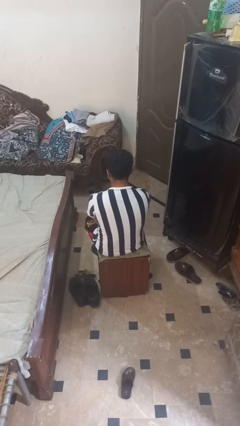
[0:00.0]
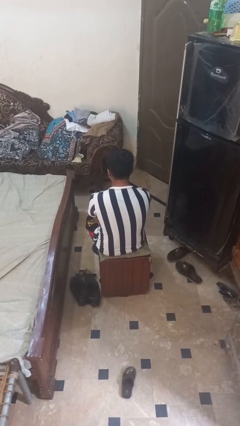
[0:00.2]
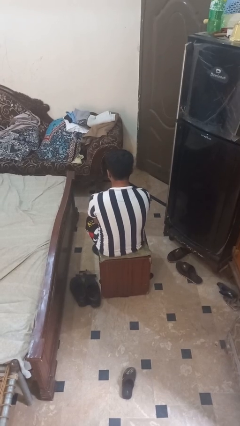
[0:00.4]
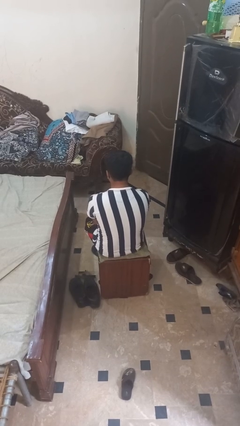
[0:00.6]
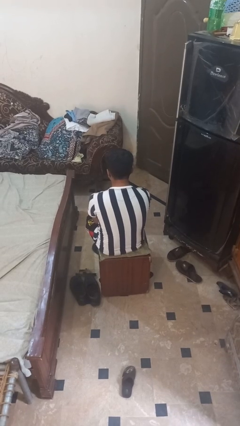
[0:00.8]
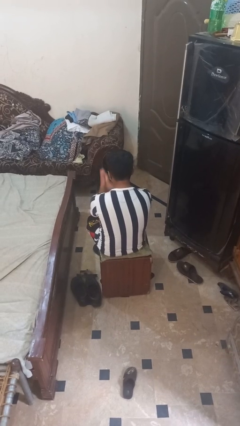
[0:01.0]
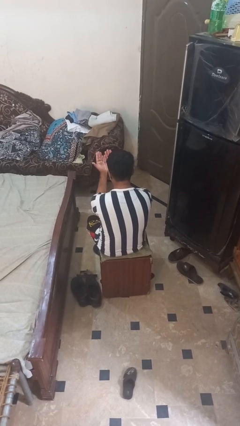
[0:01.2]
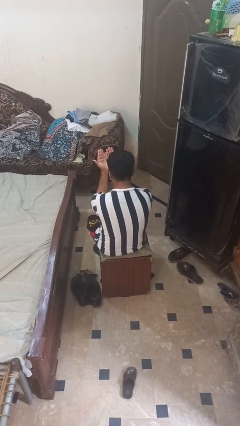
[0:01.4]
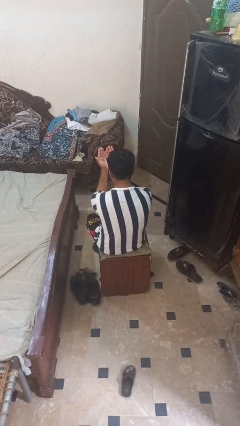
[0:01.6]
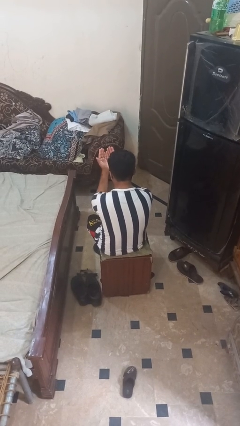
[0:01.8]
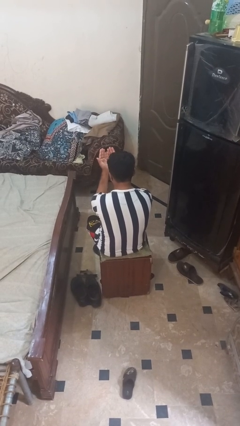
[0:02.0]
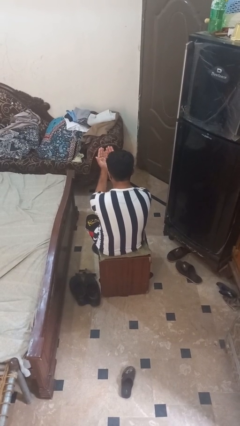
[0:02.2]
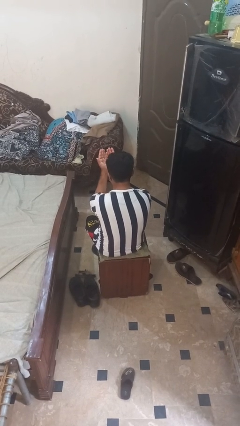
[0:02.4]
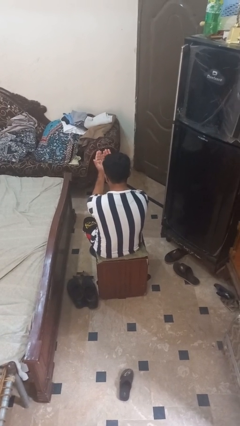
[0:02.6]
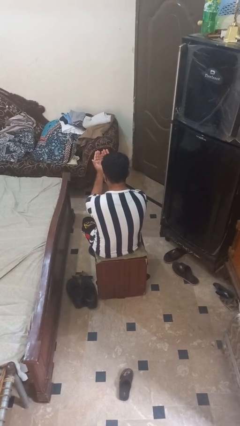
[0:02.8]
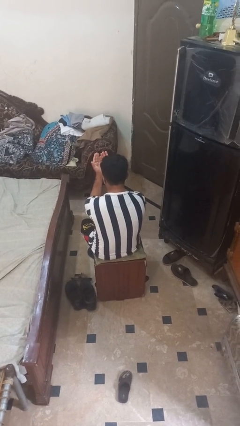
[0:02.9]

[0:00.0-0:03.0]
person prays

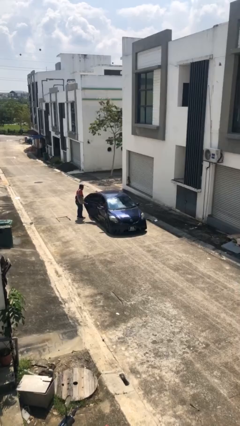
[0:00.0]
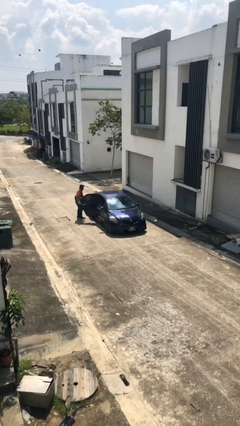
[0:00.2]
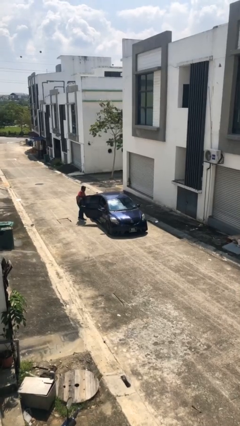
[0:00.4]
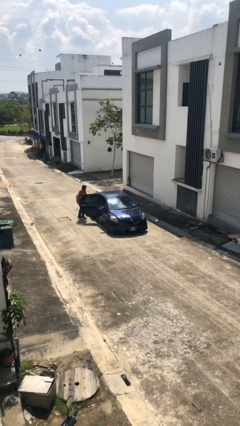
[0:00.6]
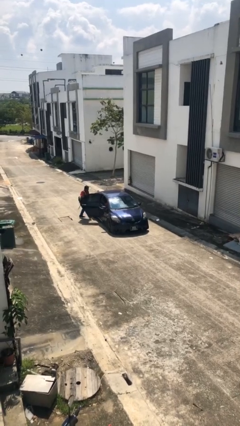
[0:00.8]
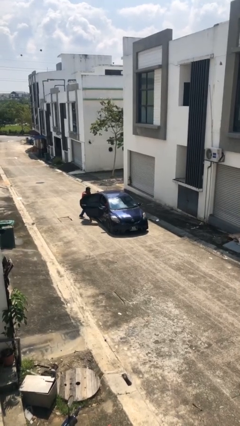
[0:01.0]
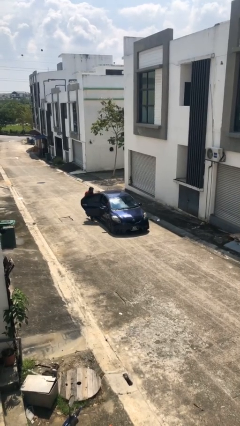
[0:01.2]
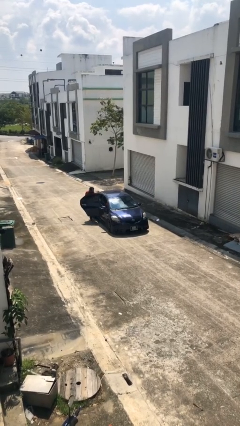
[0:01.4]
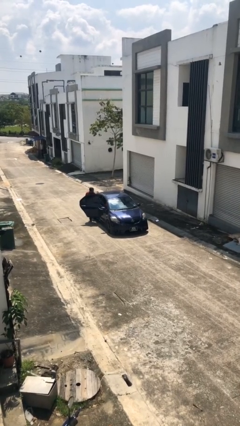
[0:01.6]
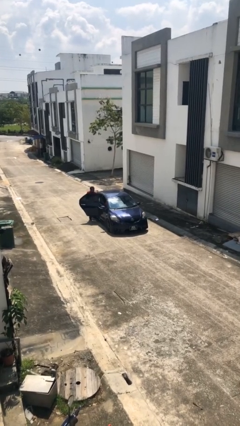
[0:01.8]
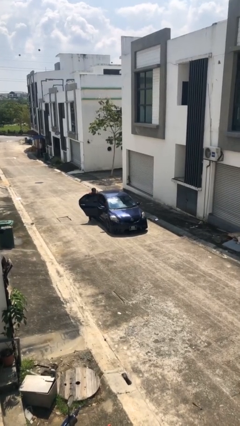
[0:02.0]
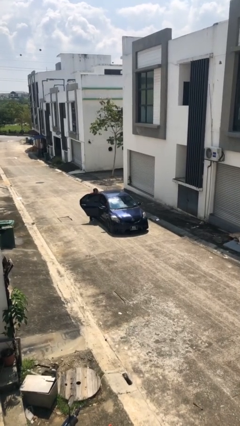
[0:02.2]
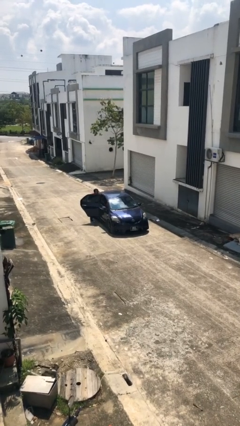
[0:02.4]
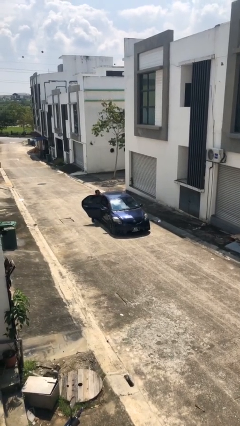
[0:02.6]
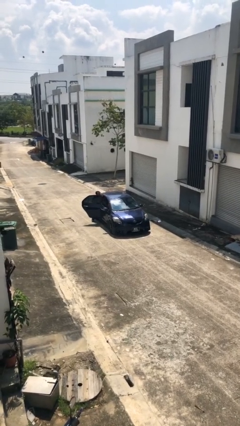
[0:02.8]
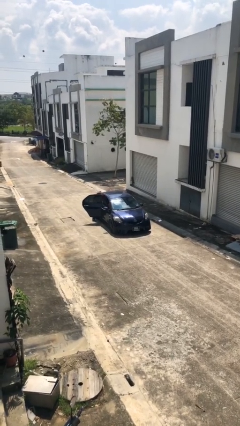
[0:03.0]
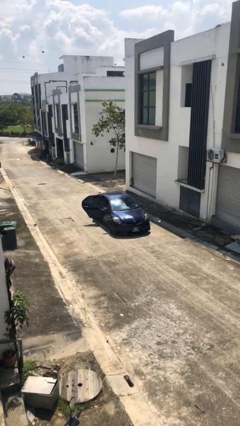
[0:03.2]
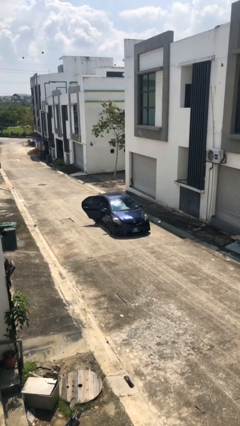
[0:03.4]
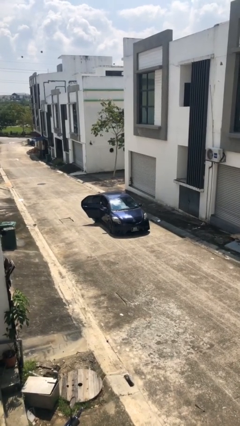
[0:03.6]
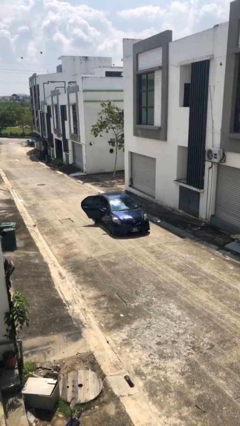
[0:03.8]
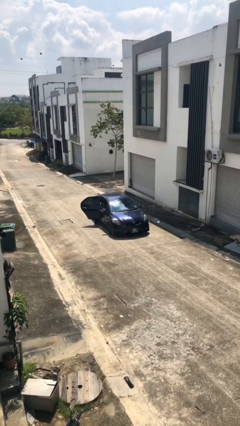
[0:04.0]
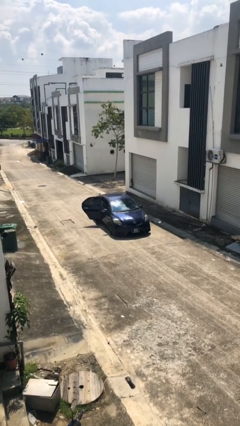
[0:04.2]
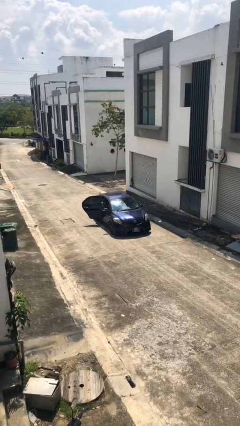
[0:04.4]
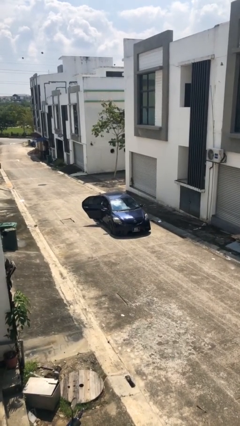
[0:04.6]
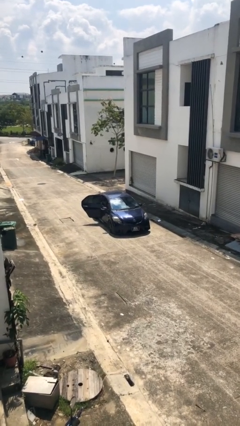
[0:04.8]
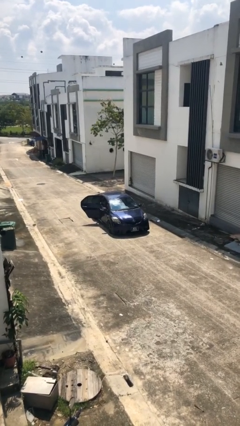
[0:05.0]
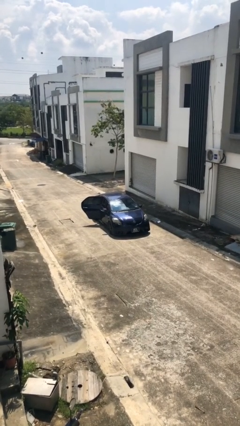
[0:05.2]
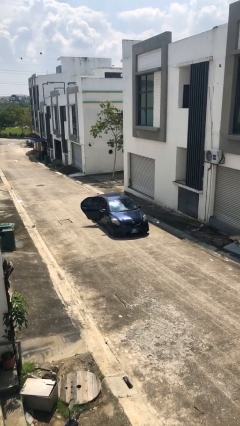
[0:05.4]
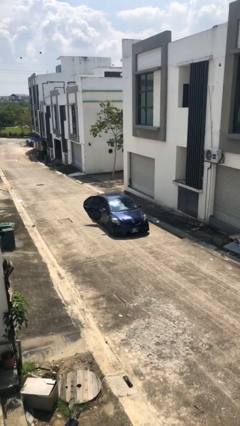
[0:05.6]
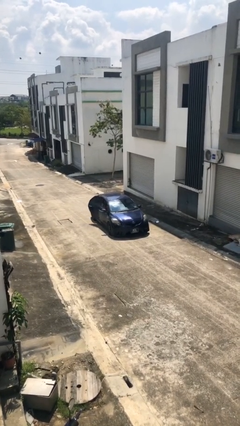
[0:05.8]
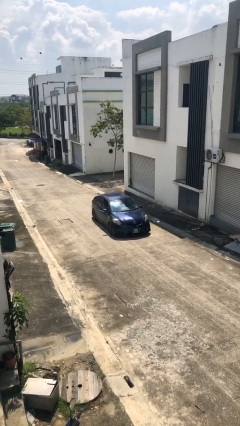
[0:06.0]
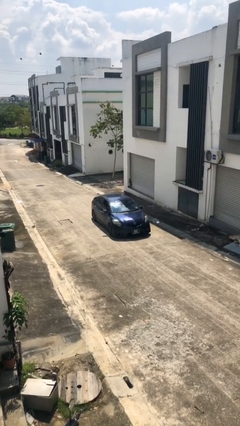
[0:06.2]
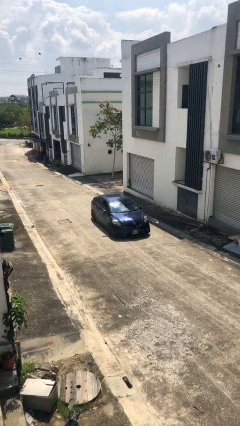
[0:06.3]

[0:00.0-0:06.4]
car picks up person

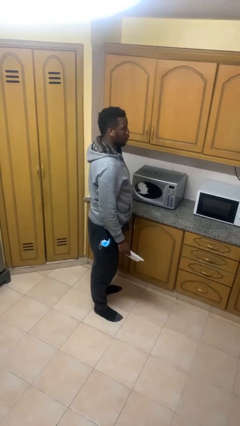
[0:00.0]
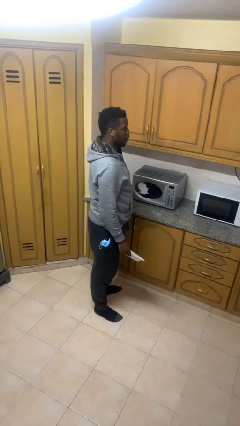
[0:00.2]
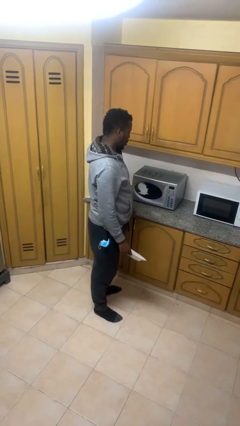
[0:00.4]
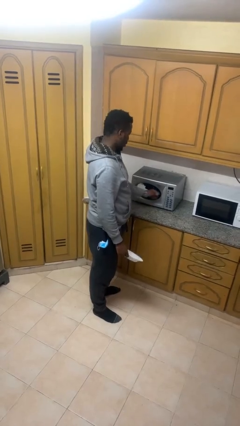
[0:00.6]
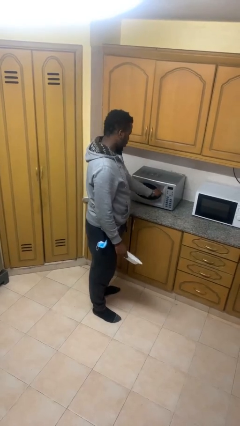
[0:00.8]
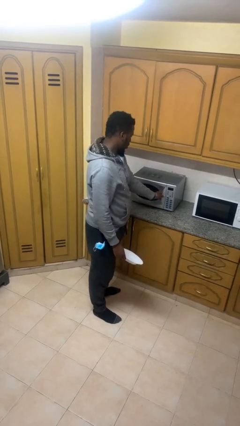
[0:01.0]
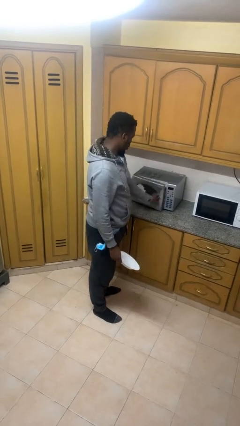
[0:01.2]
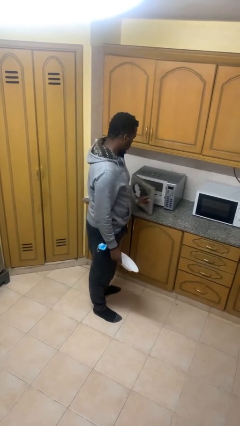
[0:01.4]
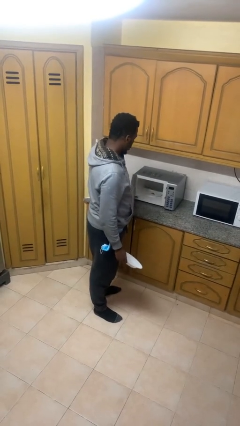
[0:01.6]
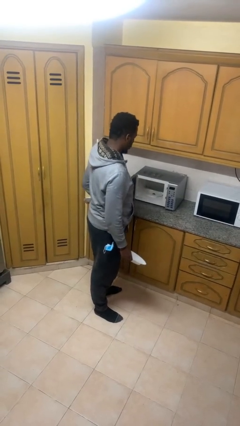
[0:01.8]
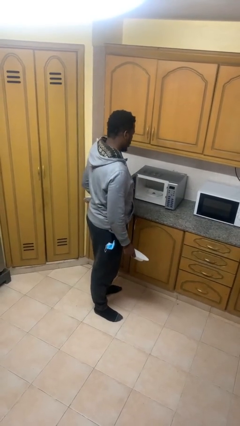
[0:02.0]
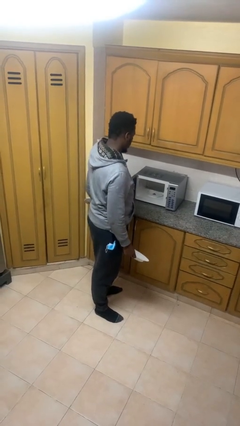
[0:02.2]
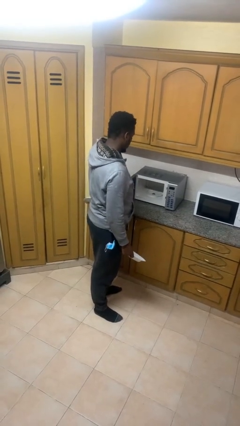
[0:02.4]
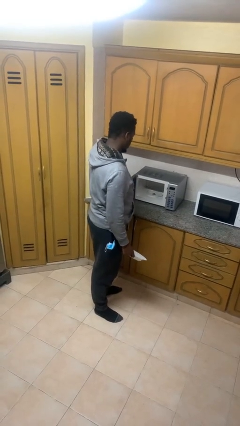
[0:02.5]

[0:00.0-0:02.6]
person opens microwave

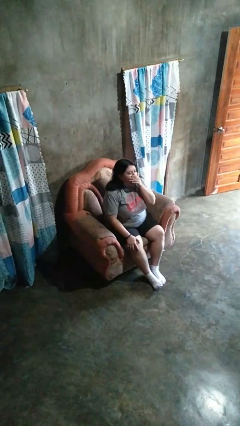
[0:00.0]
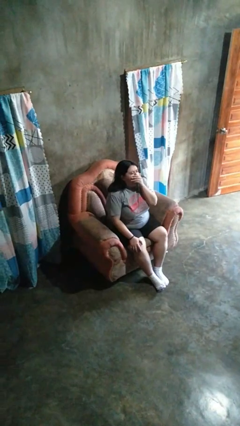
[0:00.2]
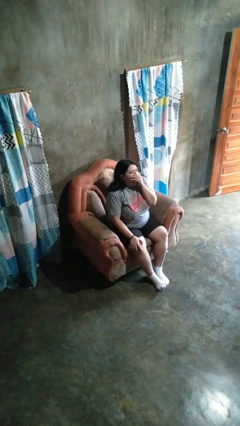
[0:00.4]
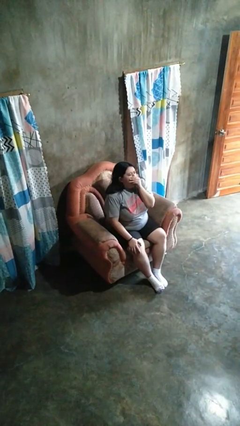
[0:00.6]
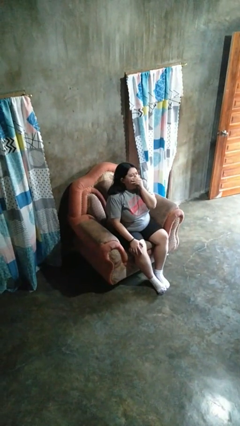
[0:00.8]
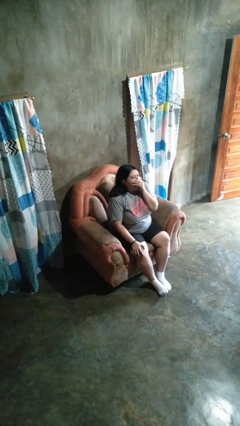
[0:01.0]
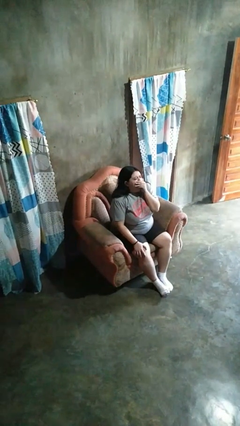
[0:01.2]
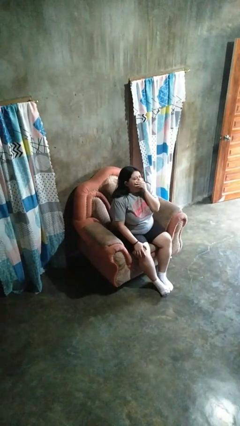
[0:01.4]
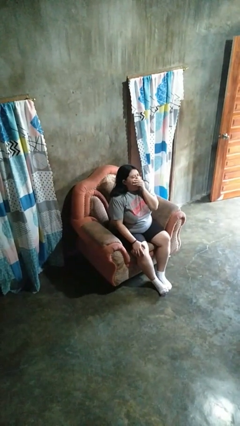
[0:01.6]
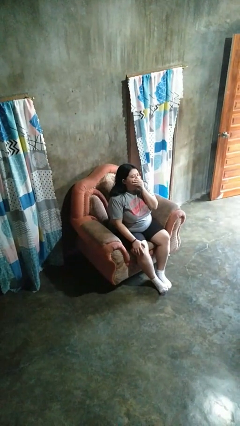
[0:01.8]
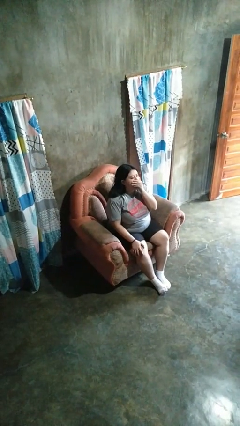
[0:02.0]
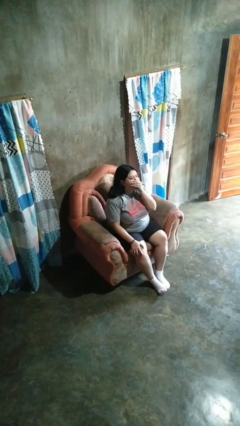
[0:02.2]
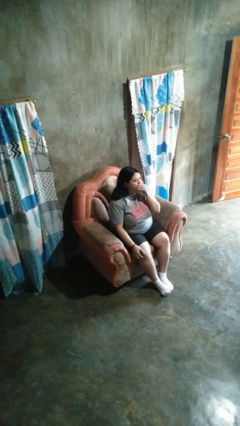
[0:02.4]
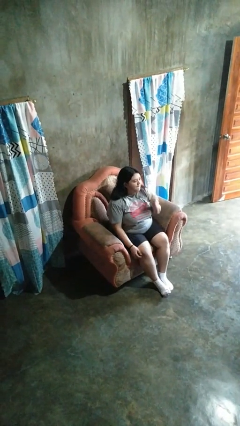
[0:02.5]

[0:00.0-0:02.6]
person yawns

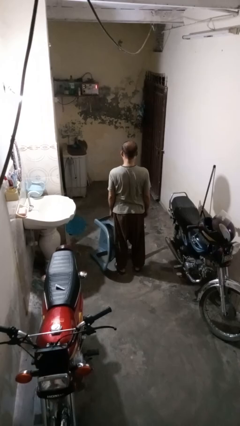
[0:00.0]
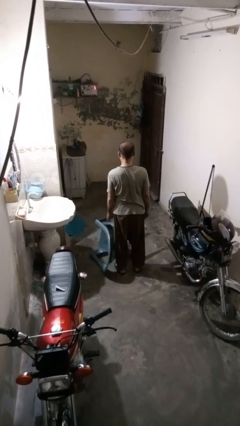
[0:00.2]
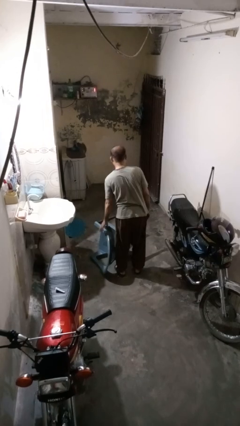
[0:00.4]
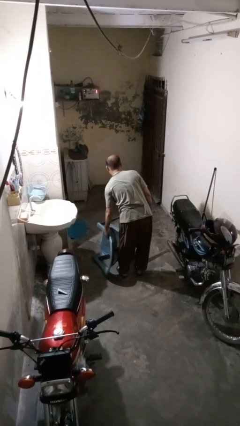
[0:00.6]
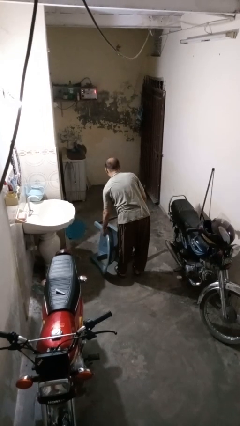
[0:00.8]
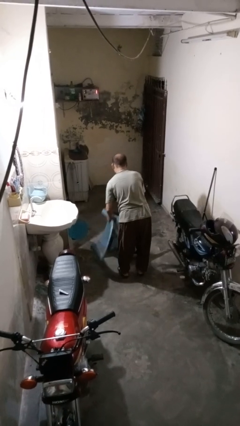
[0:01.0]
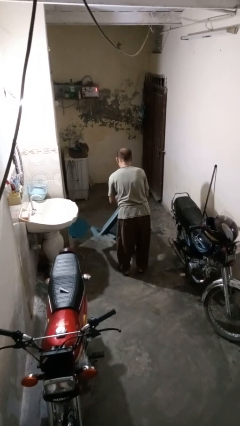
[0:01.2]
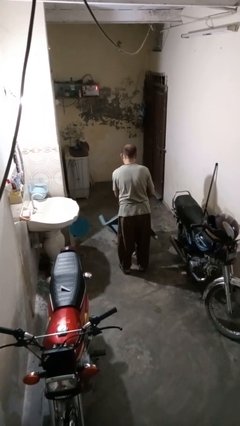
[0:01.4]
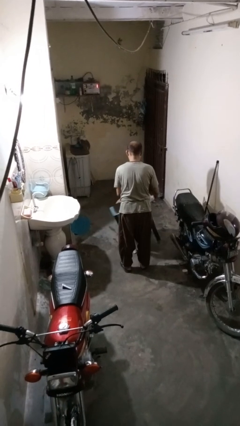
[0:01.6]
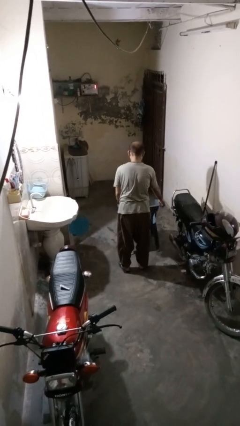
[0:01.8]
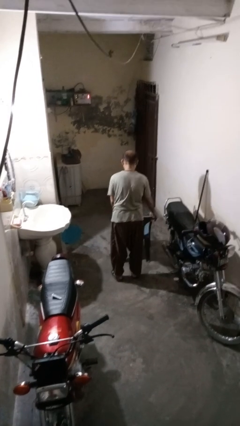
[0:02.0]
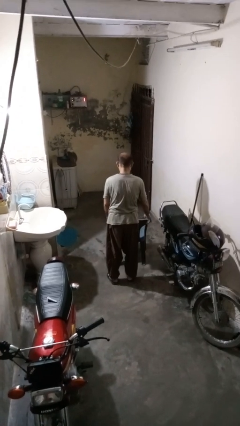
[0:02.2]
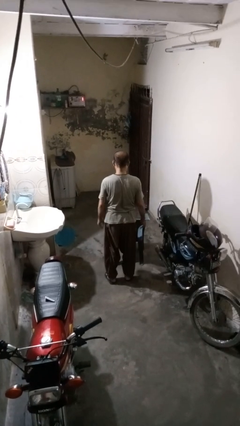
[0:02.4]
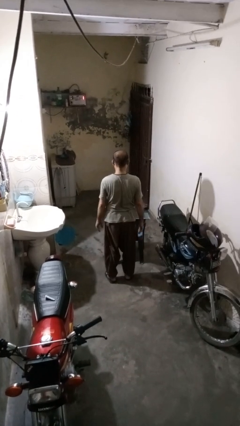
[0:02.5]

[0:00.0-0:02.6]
person sets upright furniture

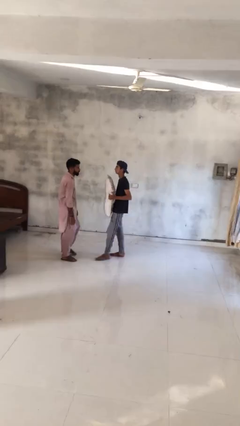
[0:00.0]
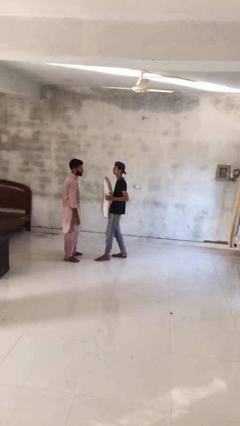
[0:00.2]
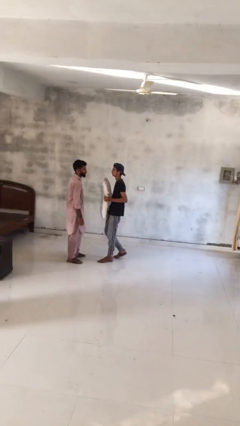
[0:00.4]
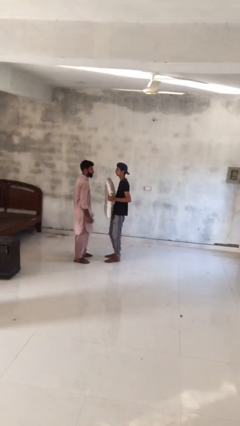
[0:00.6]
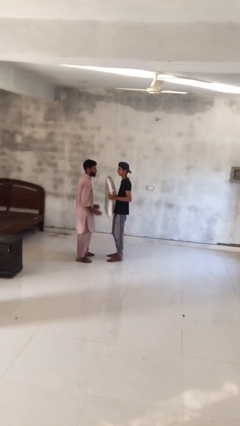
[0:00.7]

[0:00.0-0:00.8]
person transfers object to person
